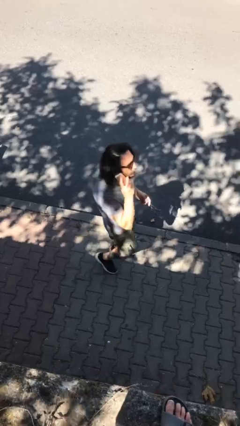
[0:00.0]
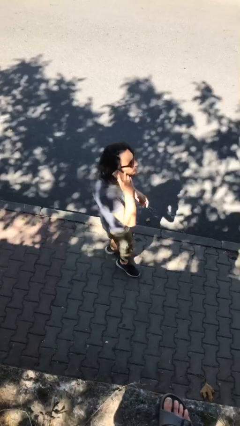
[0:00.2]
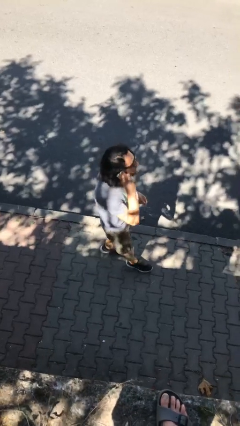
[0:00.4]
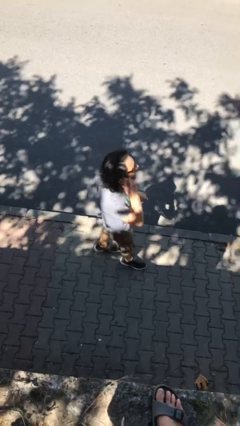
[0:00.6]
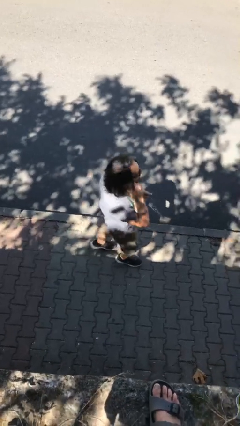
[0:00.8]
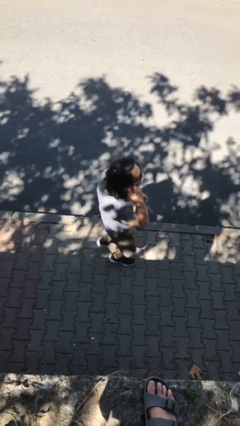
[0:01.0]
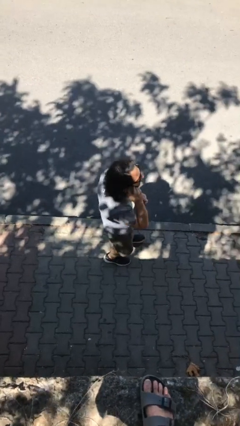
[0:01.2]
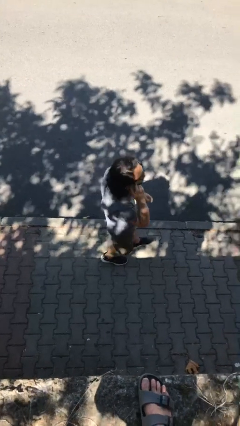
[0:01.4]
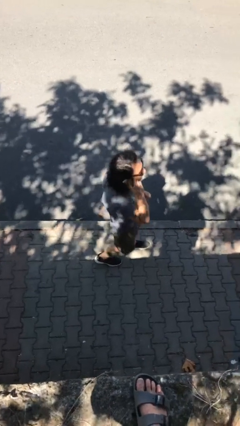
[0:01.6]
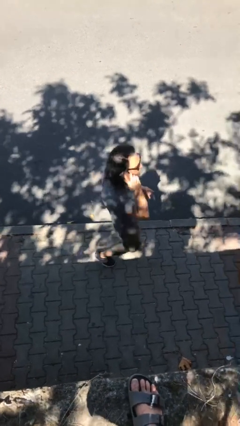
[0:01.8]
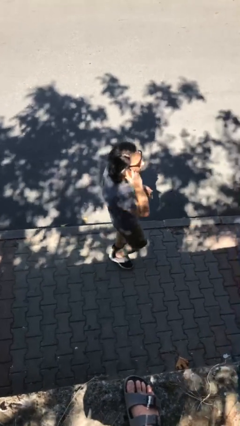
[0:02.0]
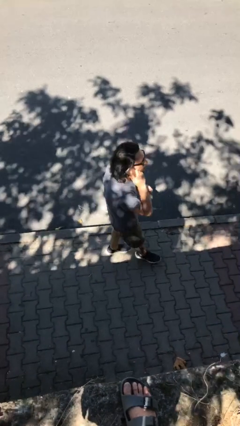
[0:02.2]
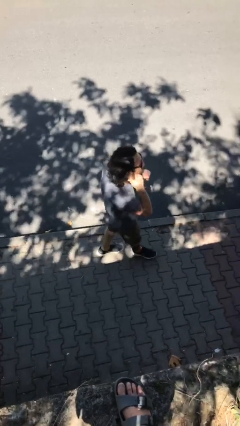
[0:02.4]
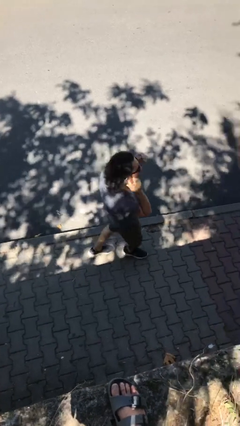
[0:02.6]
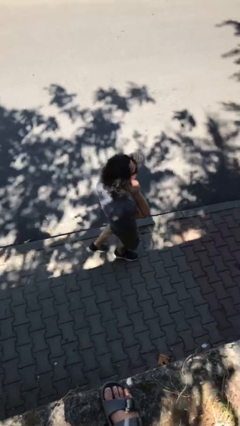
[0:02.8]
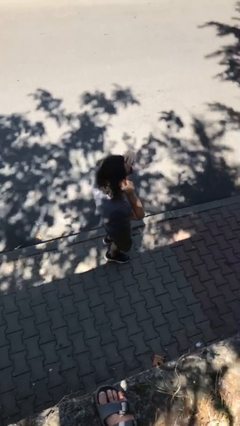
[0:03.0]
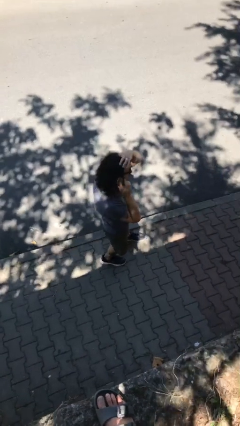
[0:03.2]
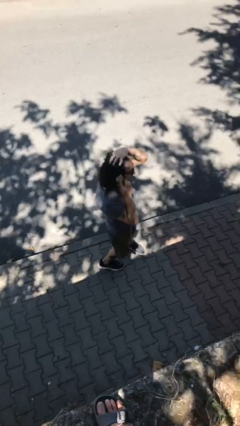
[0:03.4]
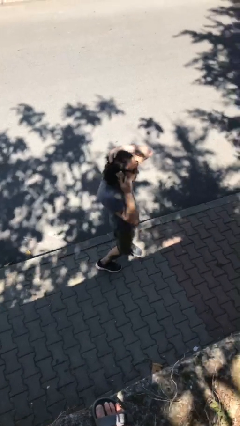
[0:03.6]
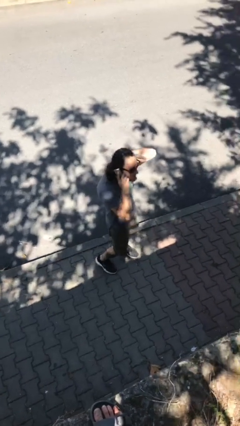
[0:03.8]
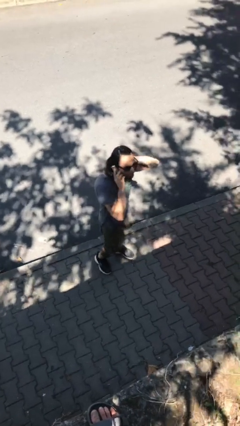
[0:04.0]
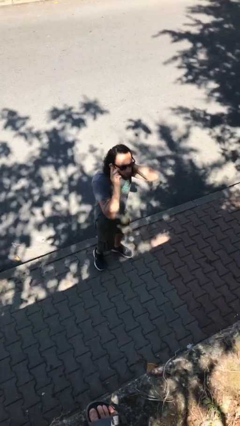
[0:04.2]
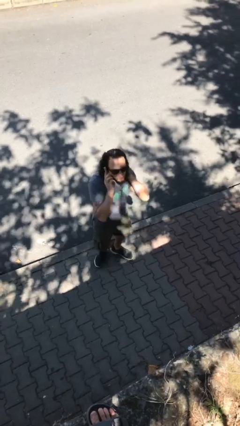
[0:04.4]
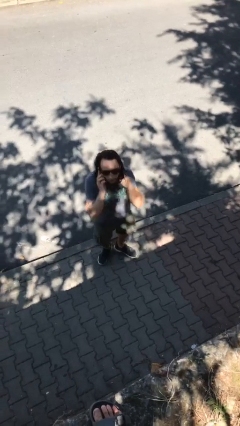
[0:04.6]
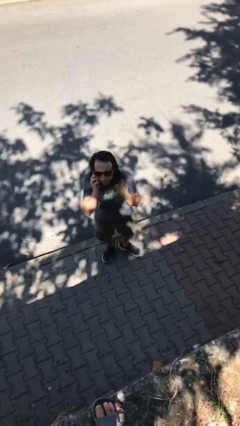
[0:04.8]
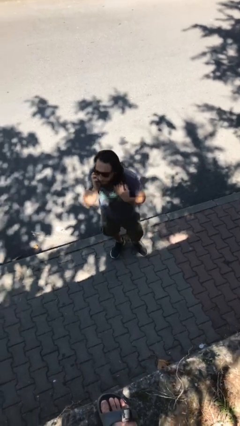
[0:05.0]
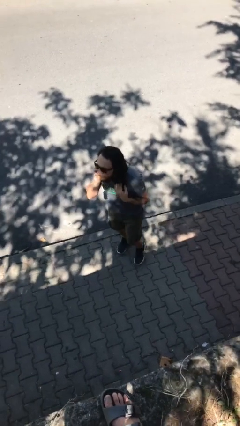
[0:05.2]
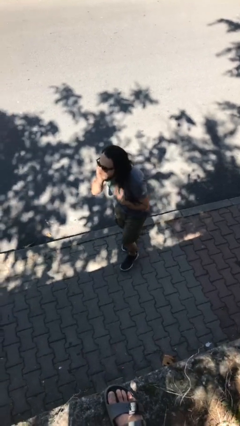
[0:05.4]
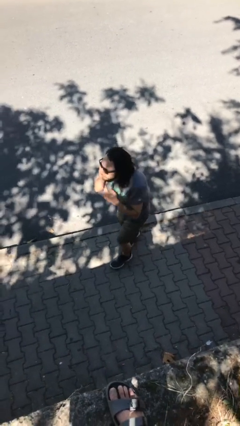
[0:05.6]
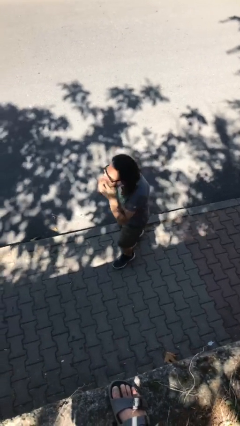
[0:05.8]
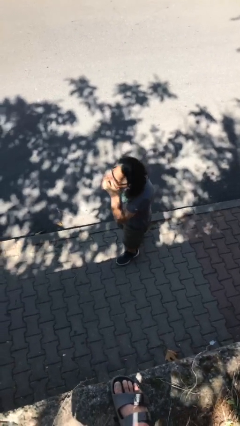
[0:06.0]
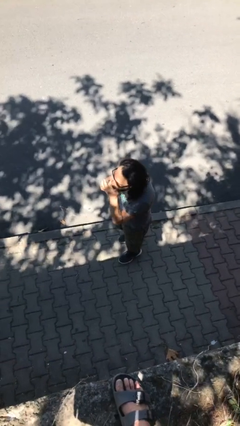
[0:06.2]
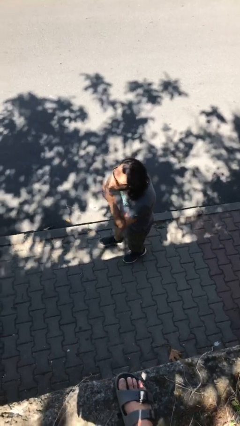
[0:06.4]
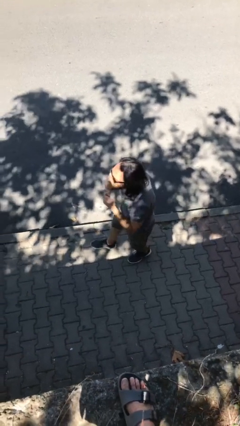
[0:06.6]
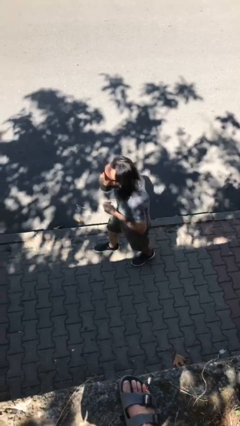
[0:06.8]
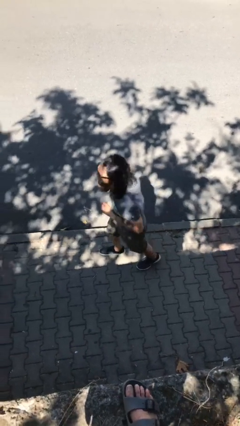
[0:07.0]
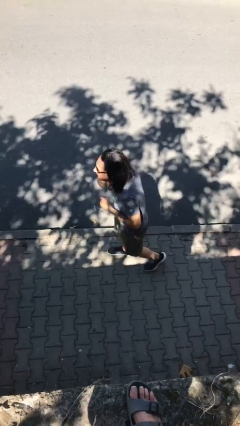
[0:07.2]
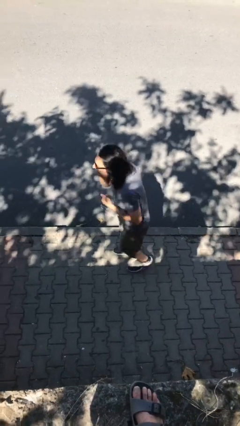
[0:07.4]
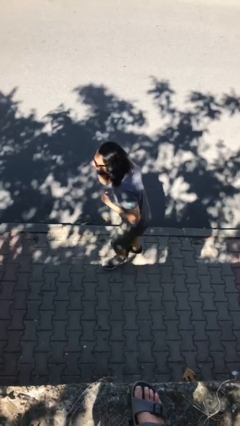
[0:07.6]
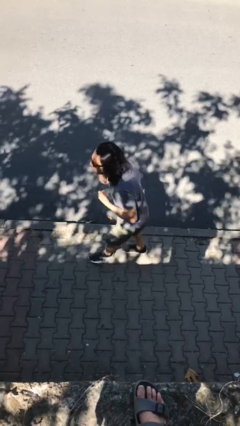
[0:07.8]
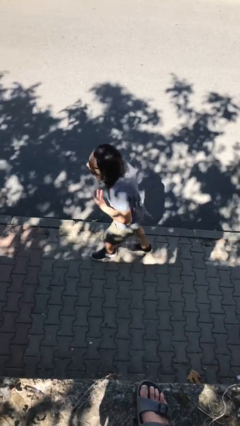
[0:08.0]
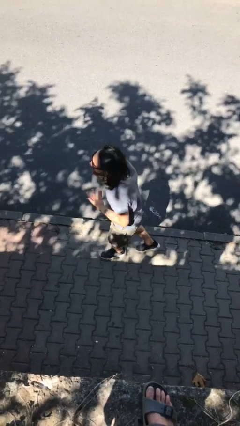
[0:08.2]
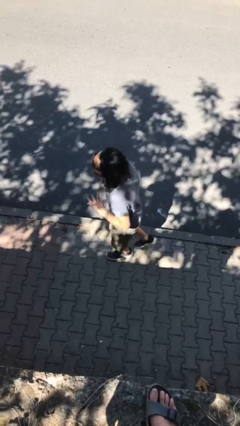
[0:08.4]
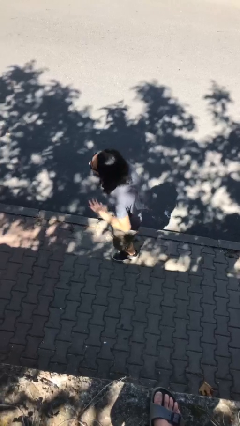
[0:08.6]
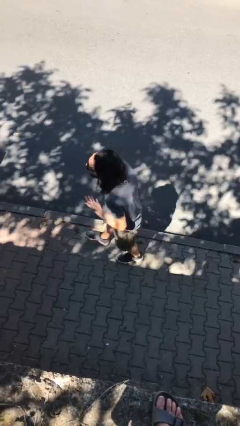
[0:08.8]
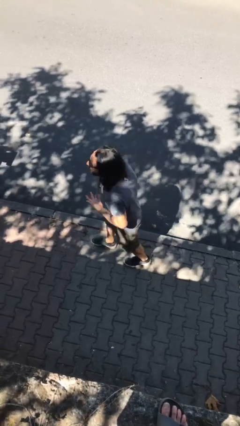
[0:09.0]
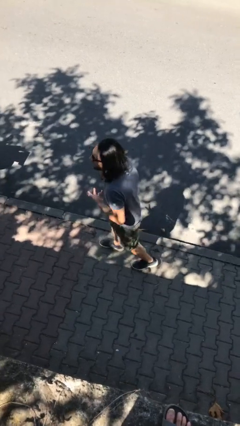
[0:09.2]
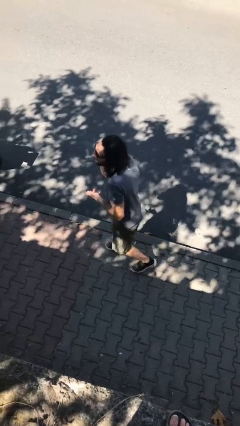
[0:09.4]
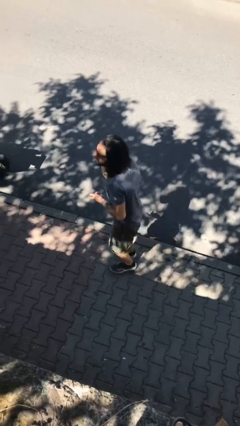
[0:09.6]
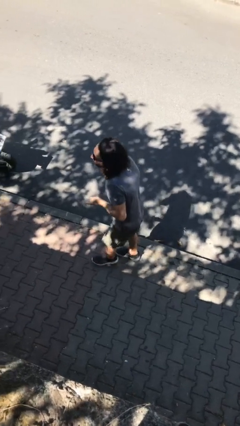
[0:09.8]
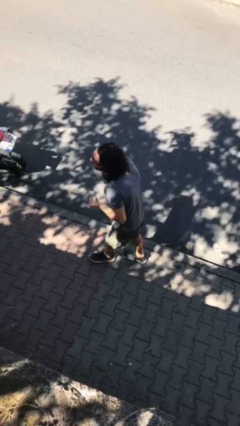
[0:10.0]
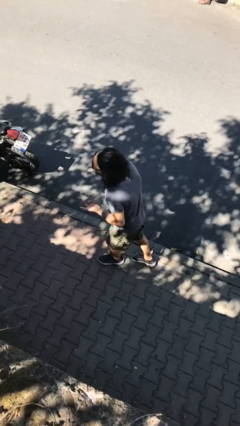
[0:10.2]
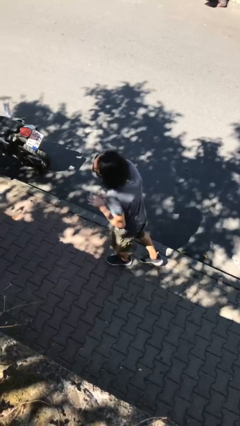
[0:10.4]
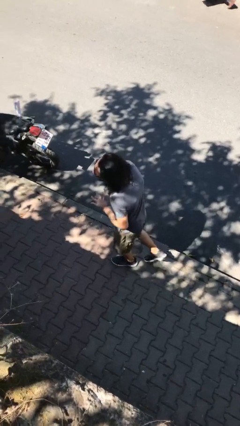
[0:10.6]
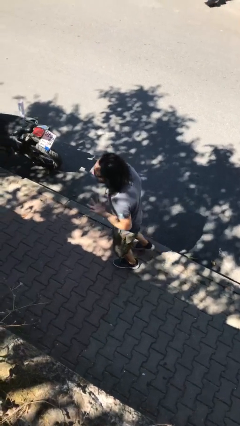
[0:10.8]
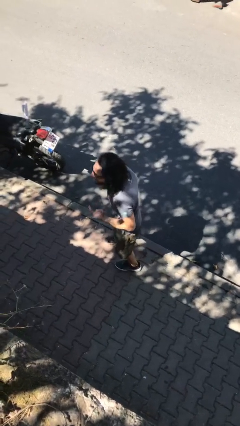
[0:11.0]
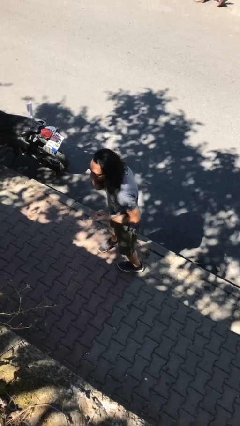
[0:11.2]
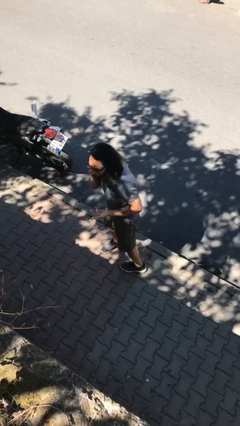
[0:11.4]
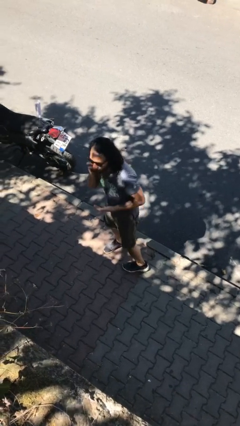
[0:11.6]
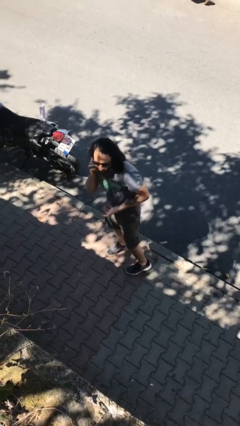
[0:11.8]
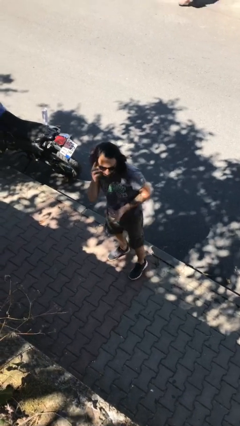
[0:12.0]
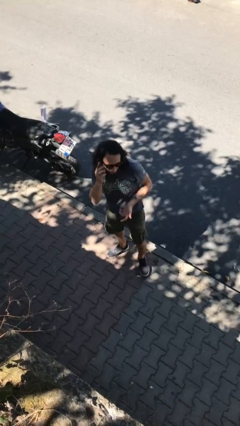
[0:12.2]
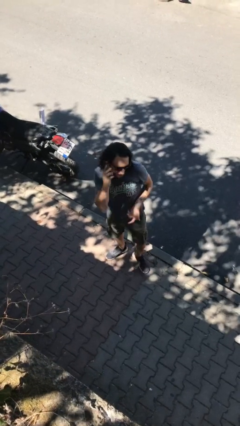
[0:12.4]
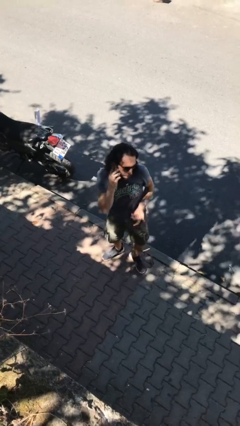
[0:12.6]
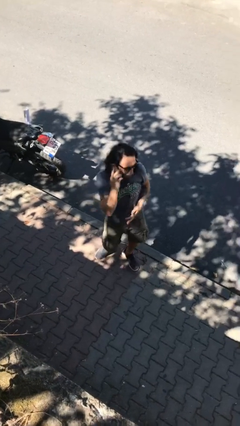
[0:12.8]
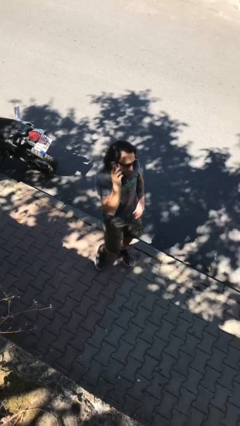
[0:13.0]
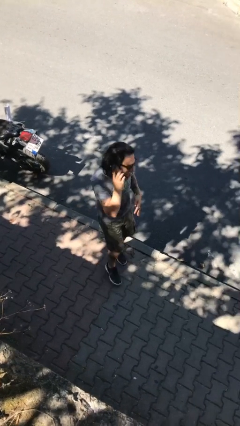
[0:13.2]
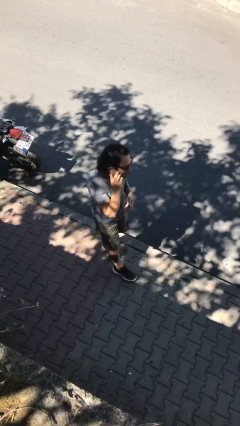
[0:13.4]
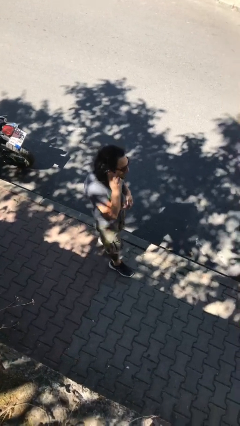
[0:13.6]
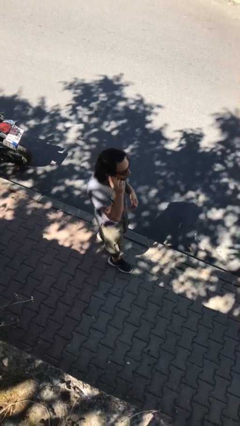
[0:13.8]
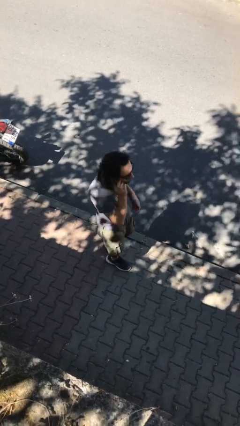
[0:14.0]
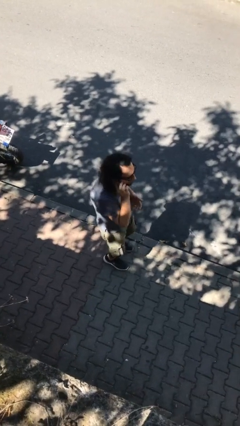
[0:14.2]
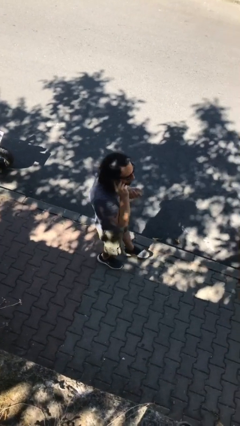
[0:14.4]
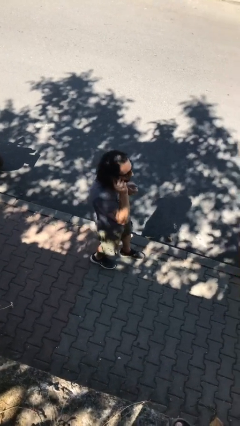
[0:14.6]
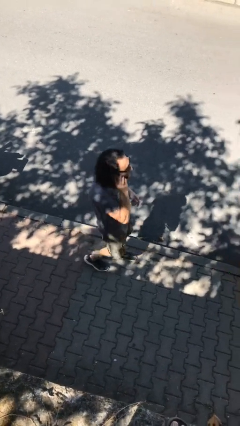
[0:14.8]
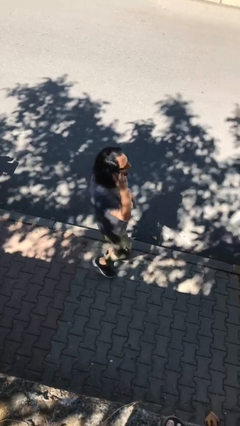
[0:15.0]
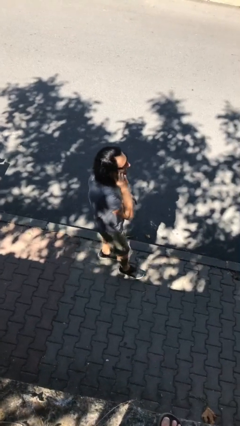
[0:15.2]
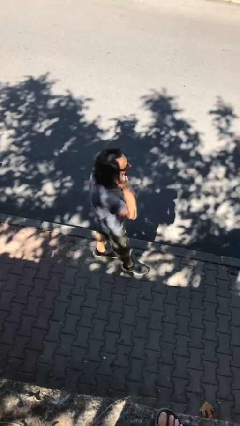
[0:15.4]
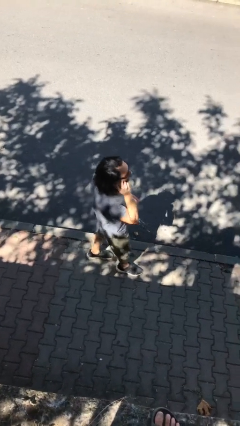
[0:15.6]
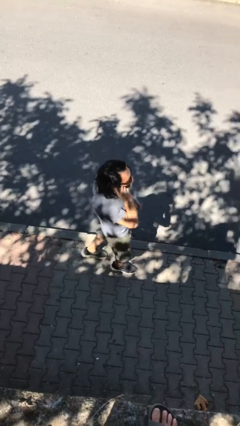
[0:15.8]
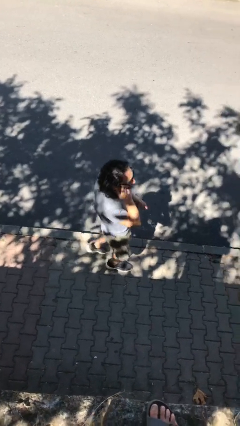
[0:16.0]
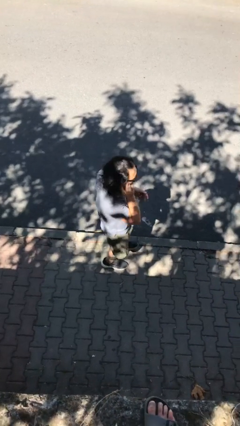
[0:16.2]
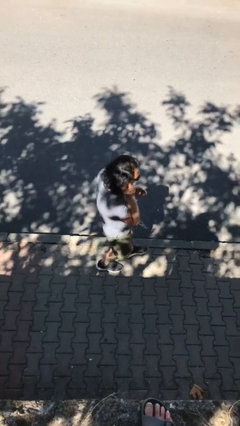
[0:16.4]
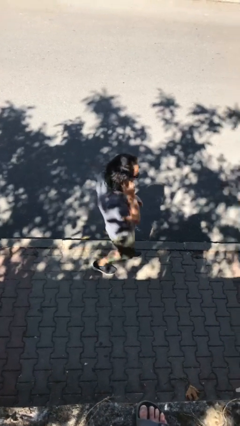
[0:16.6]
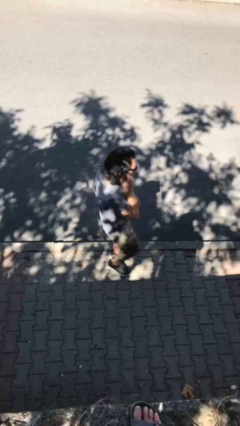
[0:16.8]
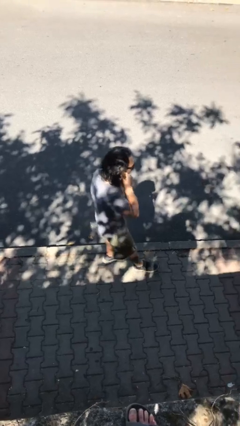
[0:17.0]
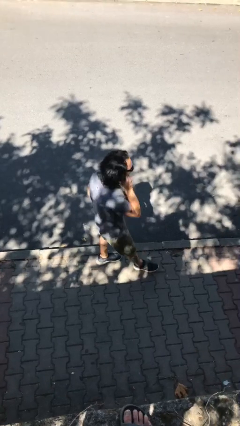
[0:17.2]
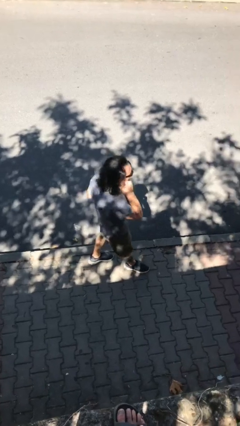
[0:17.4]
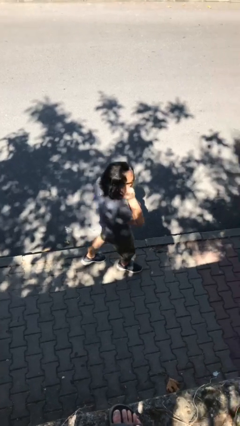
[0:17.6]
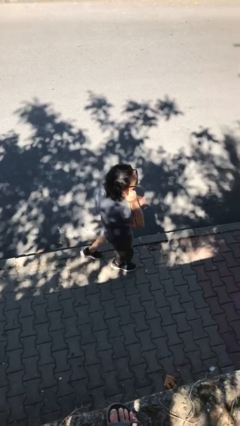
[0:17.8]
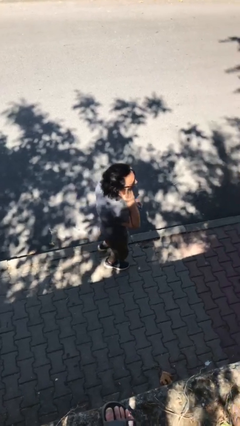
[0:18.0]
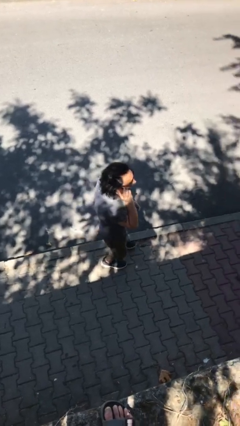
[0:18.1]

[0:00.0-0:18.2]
person talks on phone
